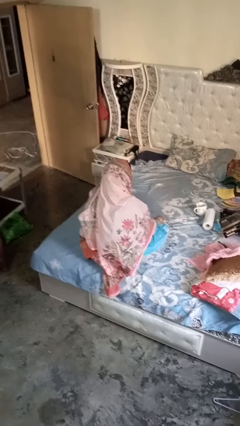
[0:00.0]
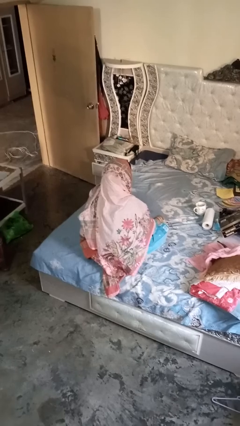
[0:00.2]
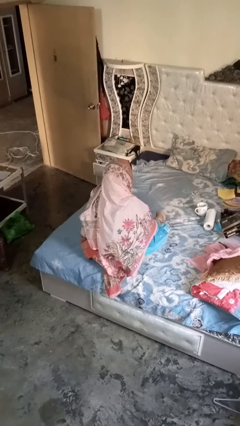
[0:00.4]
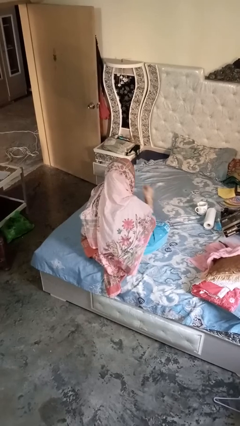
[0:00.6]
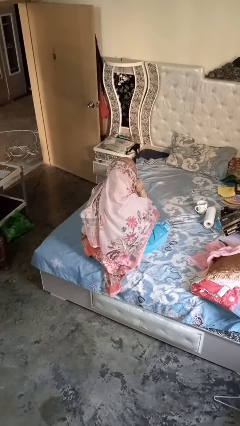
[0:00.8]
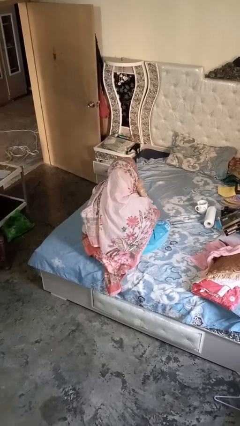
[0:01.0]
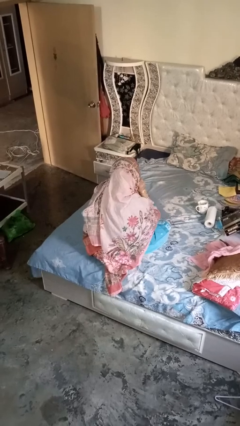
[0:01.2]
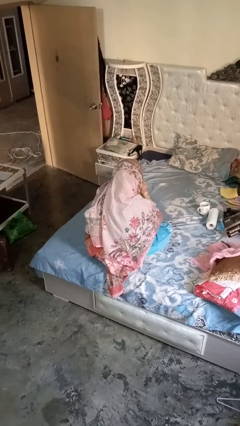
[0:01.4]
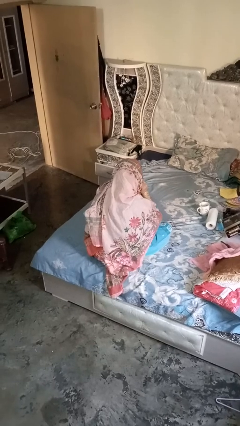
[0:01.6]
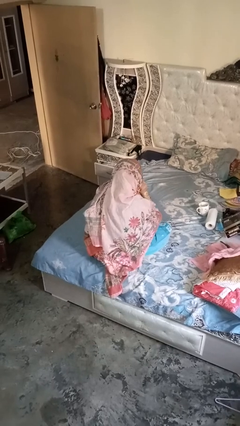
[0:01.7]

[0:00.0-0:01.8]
person gestures listen closely

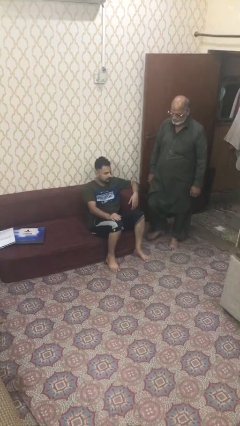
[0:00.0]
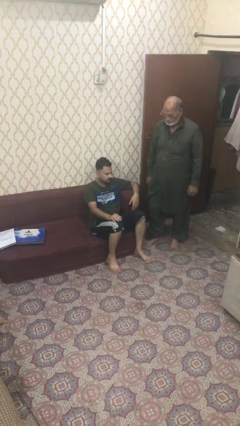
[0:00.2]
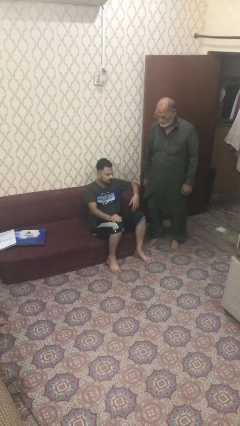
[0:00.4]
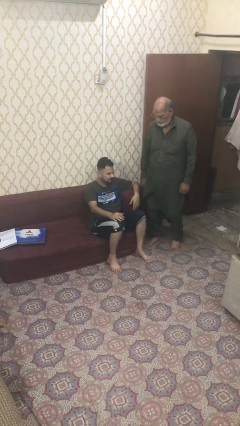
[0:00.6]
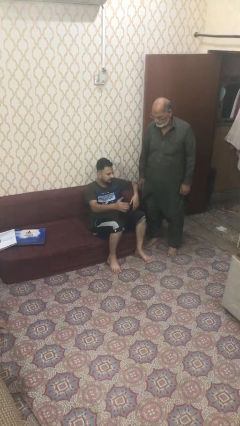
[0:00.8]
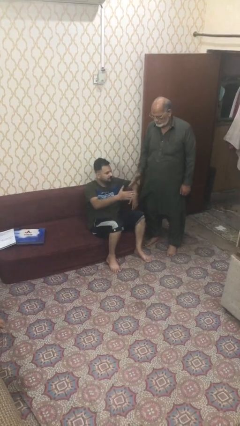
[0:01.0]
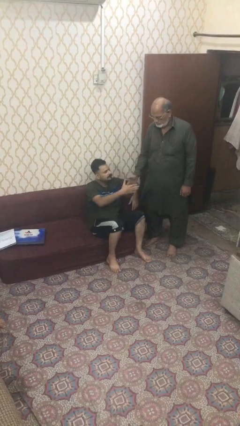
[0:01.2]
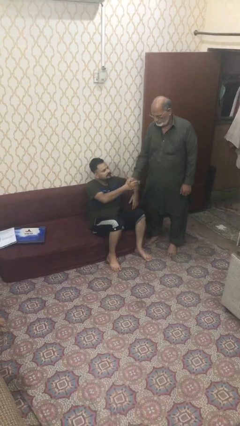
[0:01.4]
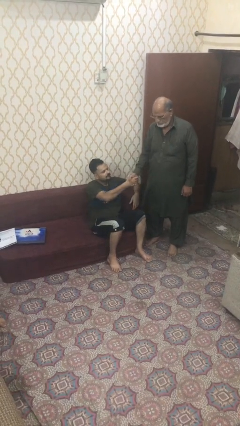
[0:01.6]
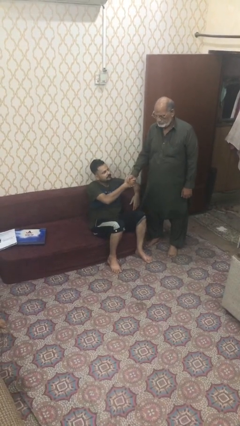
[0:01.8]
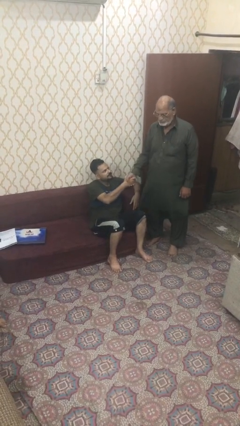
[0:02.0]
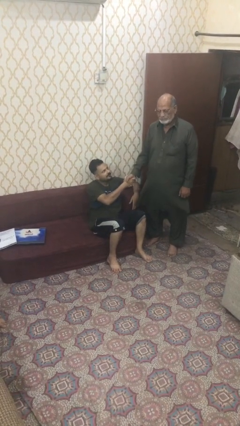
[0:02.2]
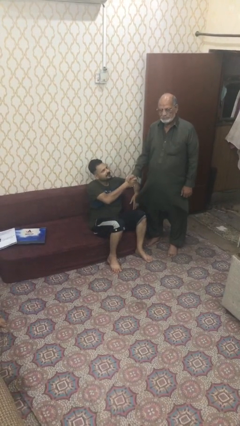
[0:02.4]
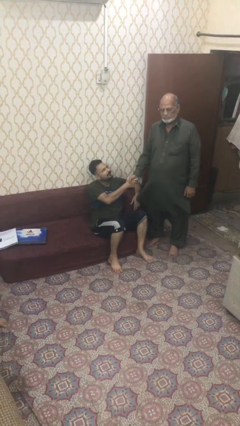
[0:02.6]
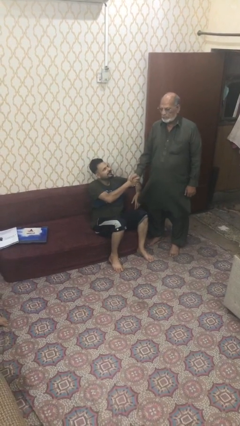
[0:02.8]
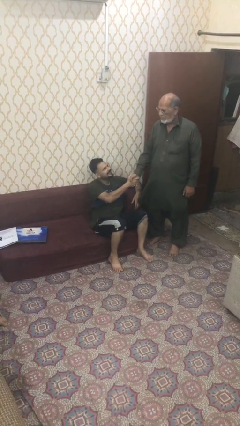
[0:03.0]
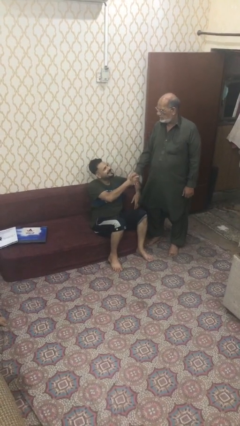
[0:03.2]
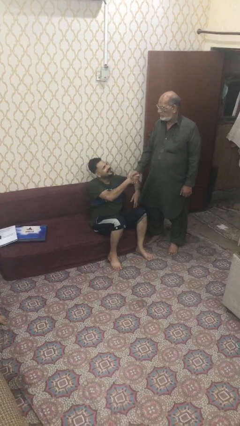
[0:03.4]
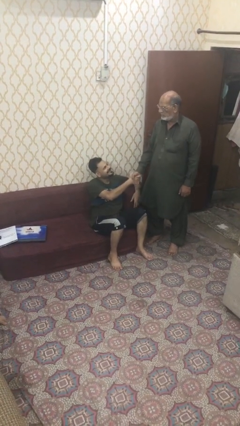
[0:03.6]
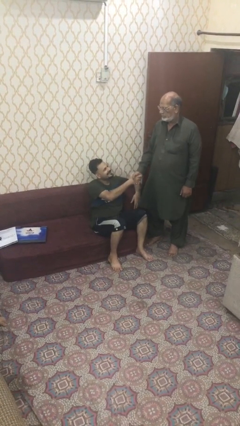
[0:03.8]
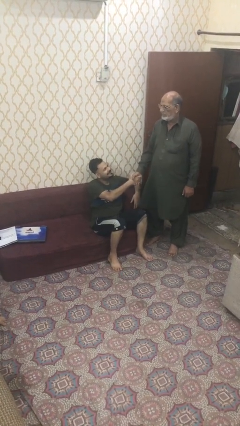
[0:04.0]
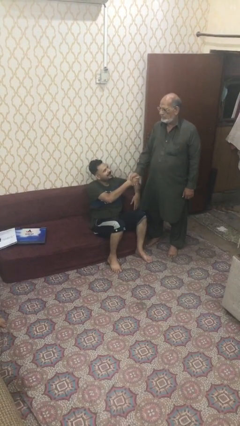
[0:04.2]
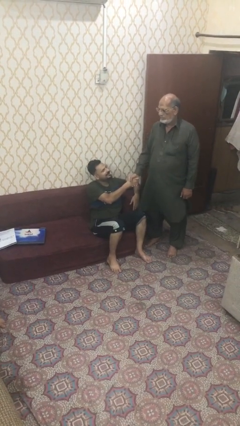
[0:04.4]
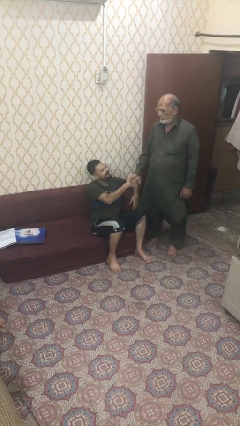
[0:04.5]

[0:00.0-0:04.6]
person shakes hand

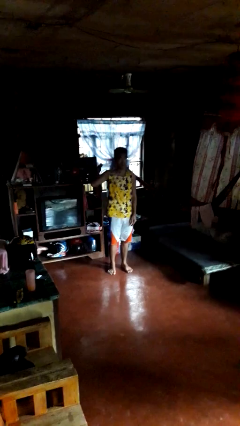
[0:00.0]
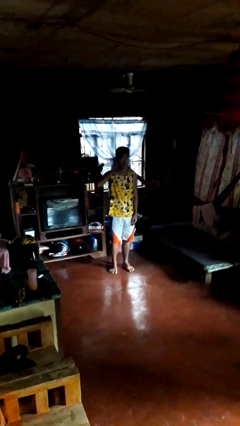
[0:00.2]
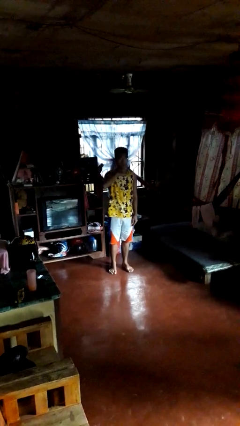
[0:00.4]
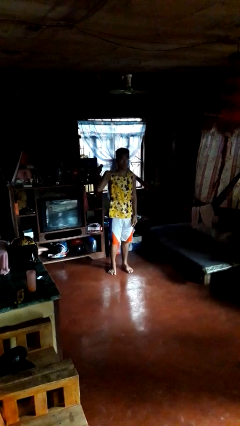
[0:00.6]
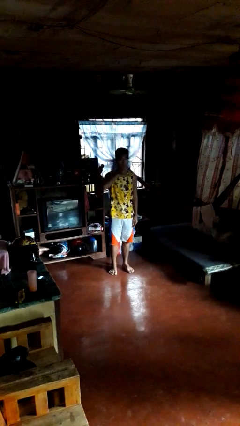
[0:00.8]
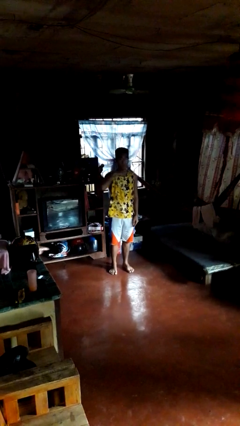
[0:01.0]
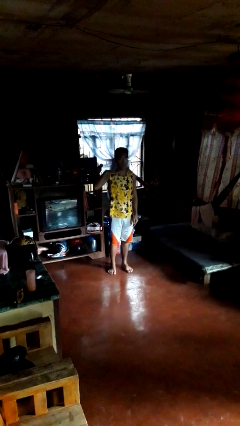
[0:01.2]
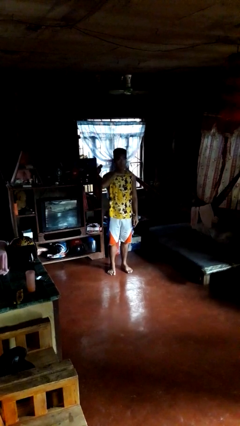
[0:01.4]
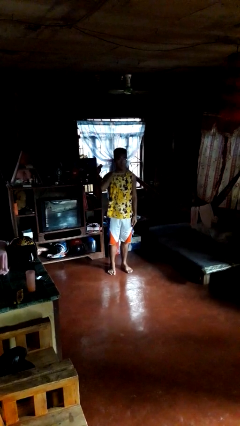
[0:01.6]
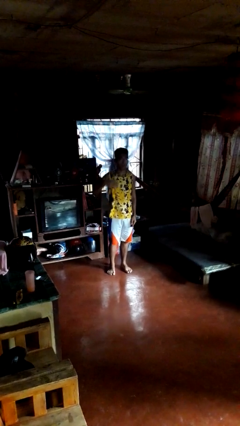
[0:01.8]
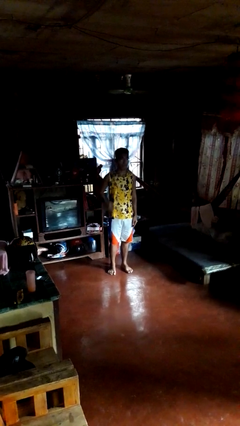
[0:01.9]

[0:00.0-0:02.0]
person gestures cut

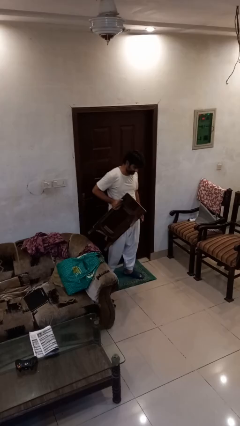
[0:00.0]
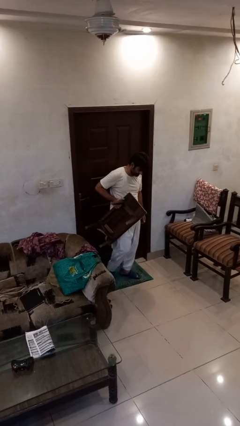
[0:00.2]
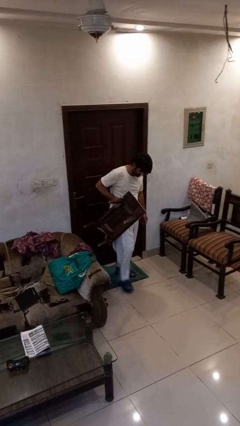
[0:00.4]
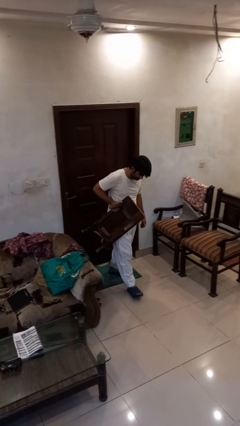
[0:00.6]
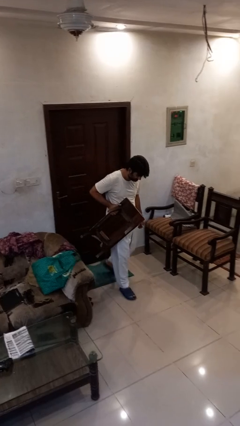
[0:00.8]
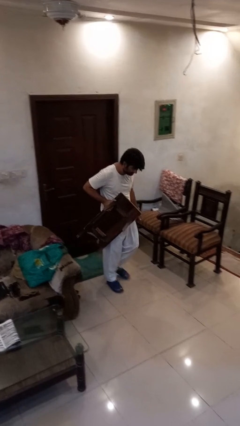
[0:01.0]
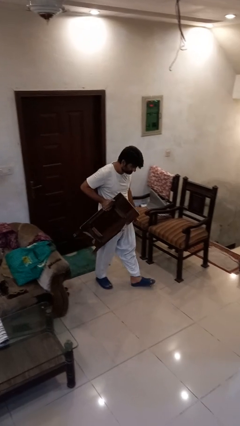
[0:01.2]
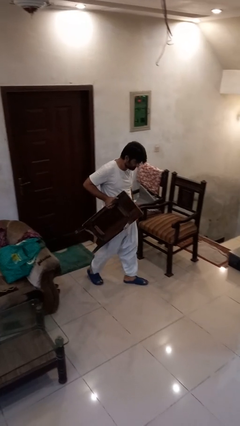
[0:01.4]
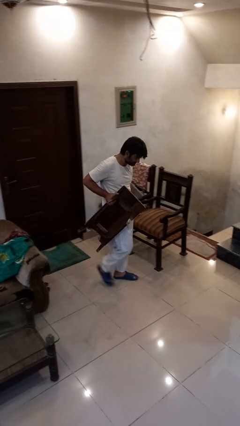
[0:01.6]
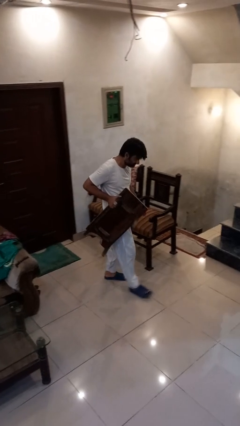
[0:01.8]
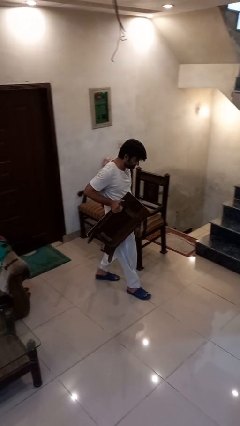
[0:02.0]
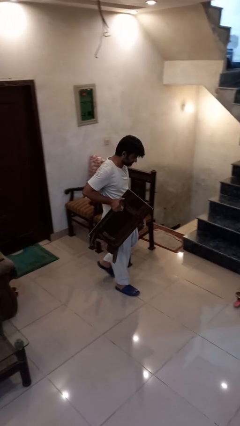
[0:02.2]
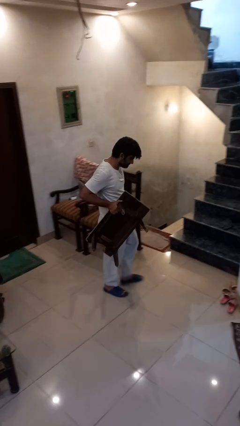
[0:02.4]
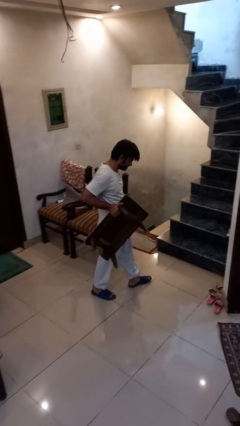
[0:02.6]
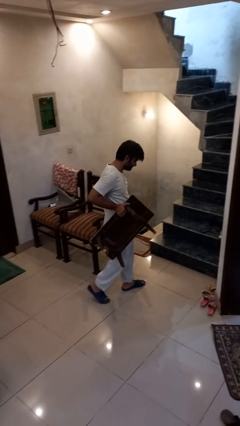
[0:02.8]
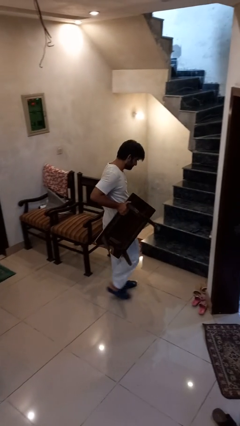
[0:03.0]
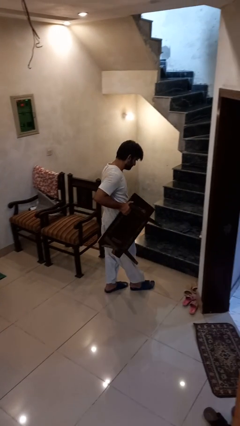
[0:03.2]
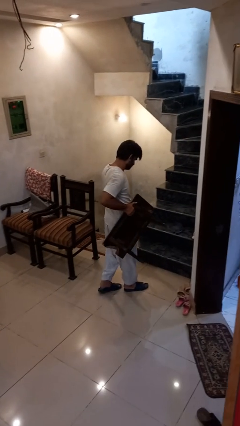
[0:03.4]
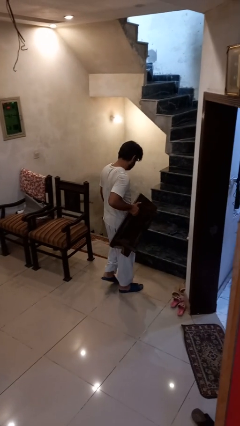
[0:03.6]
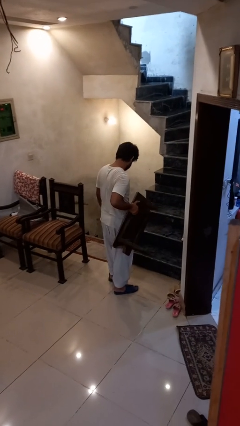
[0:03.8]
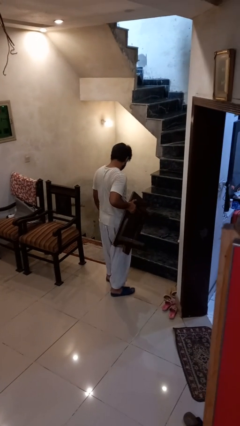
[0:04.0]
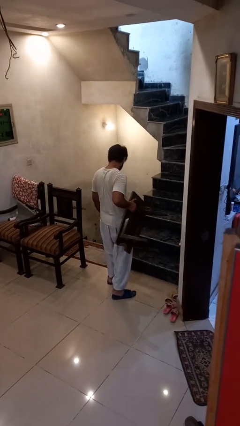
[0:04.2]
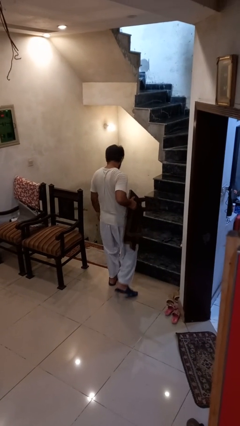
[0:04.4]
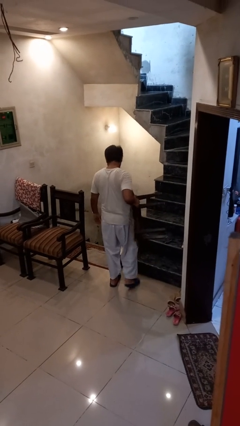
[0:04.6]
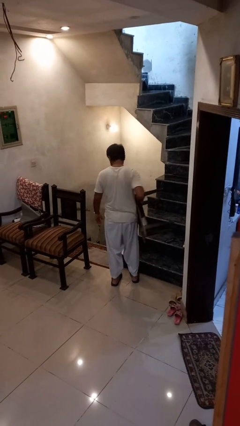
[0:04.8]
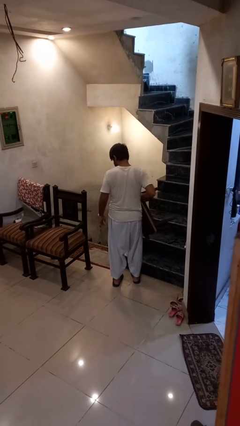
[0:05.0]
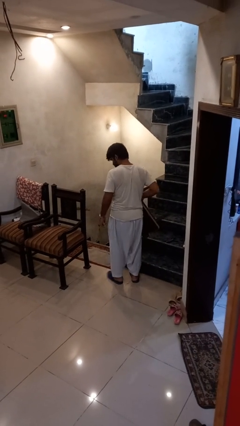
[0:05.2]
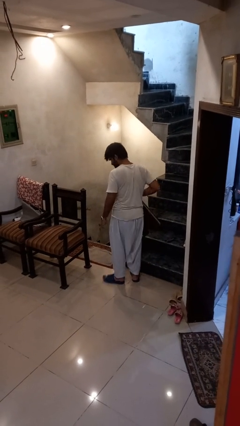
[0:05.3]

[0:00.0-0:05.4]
person carries furniture

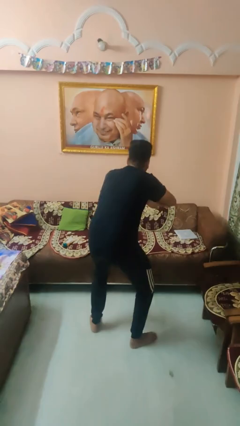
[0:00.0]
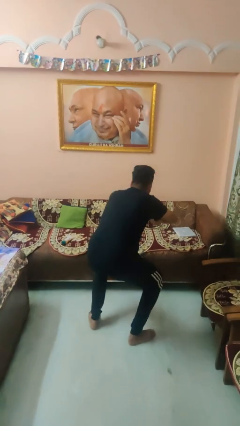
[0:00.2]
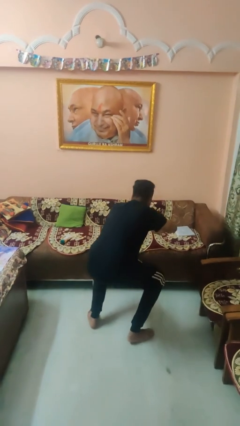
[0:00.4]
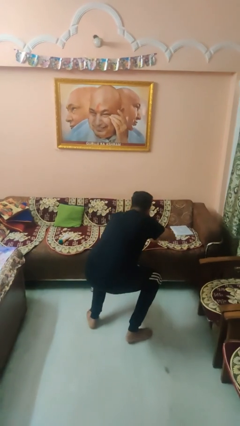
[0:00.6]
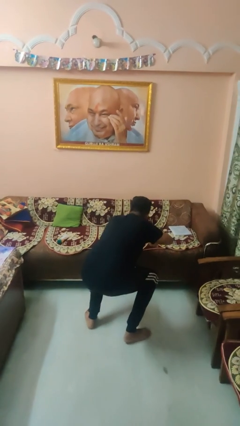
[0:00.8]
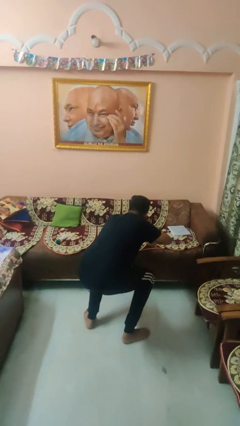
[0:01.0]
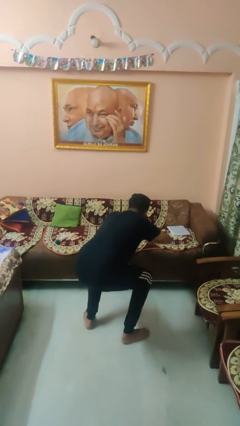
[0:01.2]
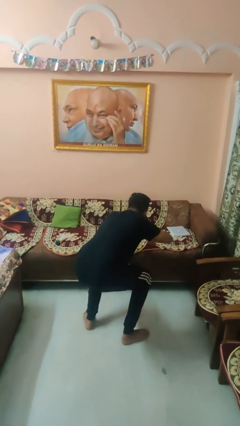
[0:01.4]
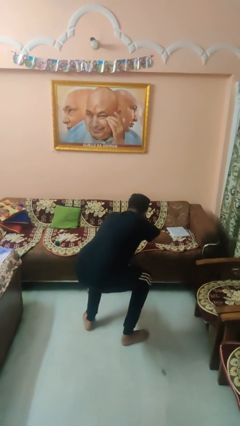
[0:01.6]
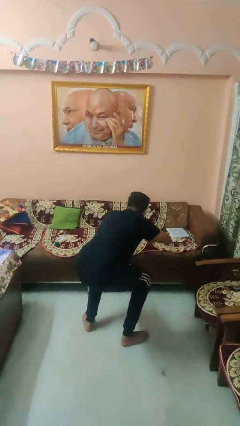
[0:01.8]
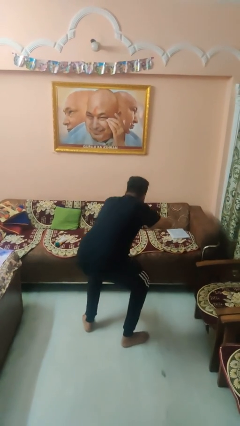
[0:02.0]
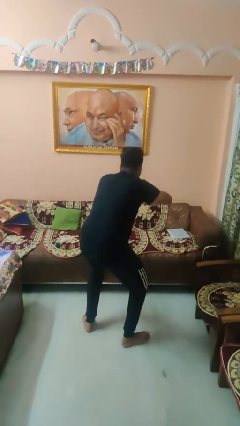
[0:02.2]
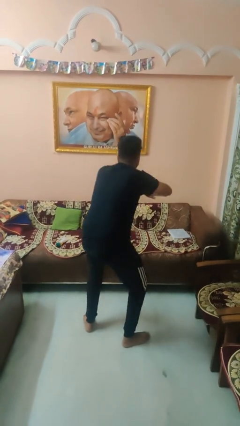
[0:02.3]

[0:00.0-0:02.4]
person exercises with situp

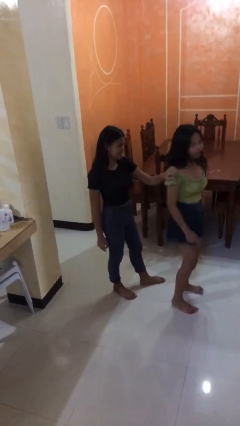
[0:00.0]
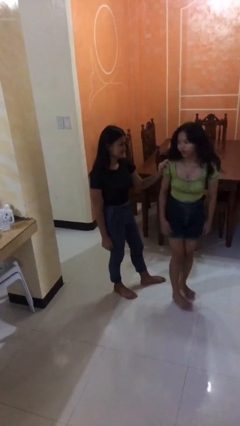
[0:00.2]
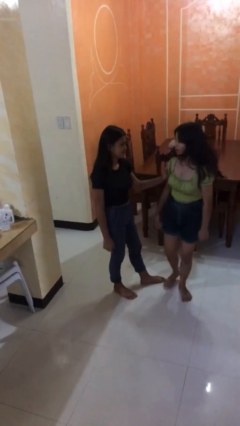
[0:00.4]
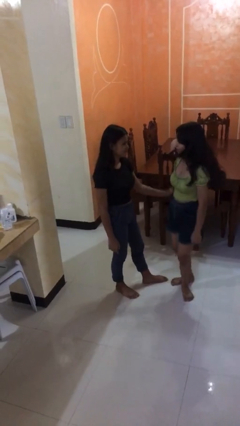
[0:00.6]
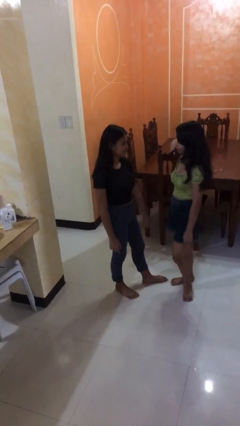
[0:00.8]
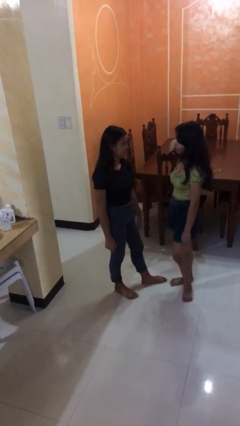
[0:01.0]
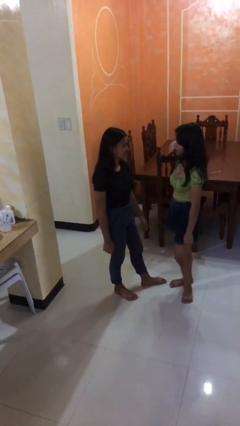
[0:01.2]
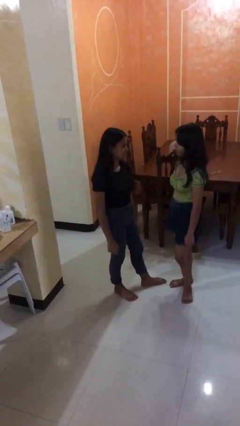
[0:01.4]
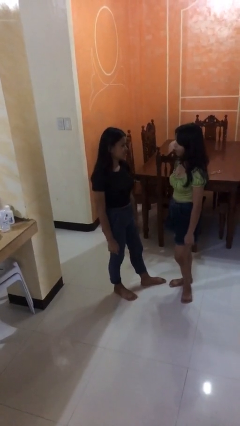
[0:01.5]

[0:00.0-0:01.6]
person spins person around
